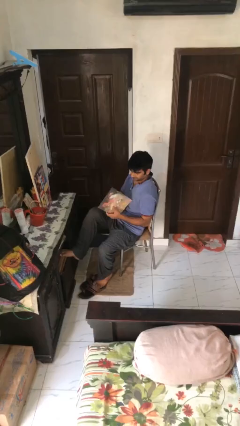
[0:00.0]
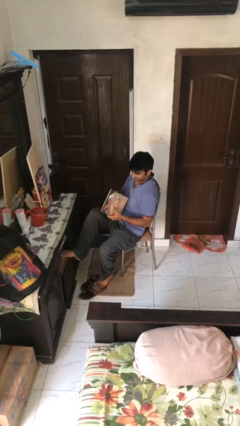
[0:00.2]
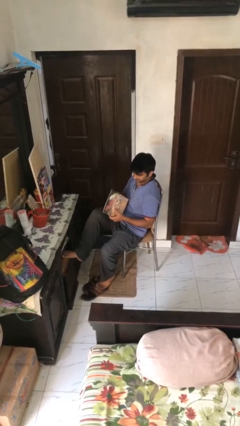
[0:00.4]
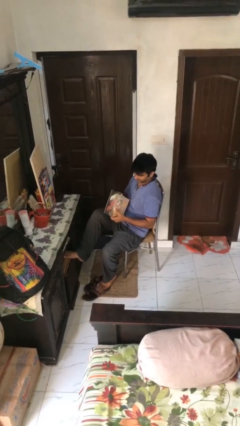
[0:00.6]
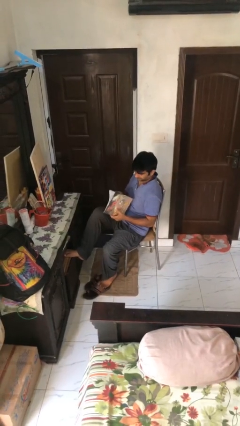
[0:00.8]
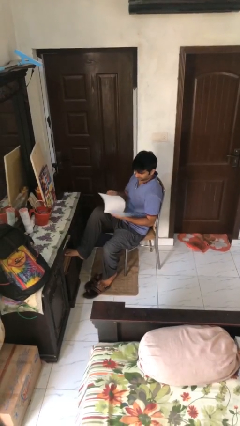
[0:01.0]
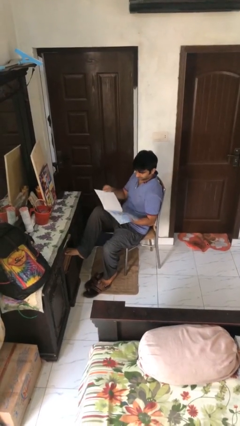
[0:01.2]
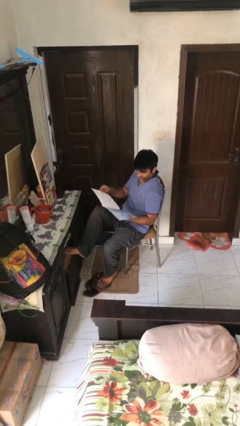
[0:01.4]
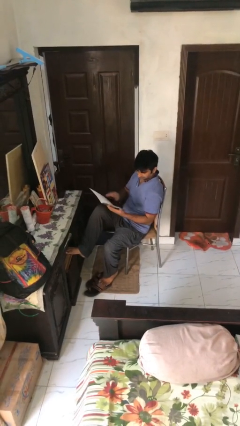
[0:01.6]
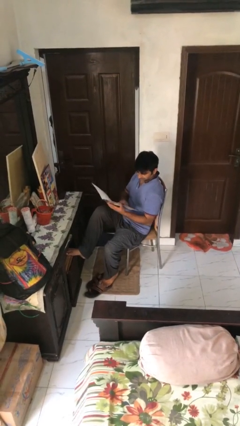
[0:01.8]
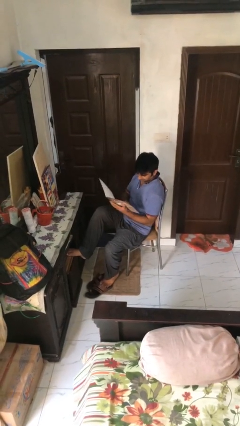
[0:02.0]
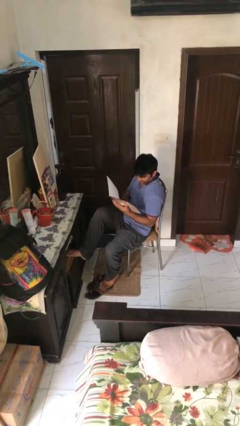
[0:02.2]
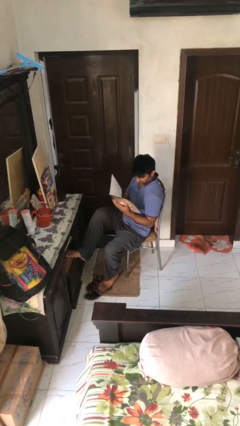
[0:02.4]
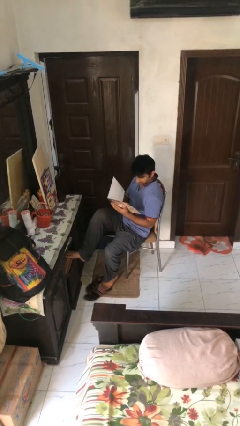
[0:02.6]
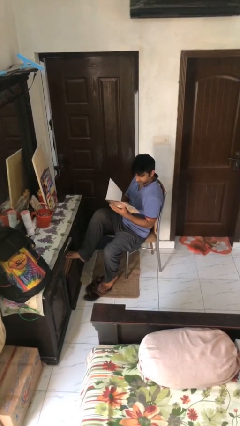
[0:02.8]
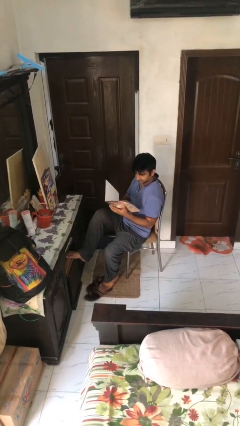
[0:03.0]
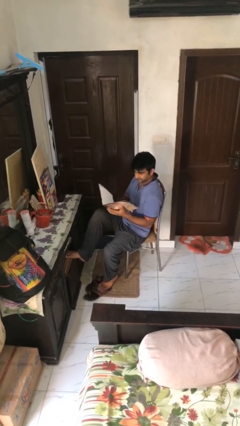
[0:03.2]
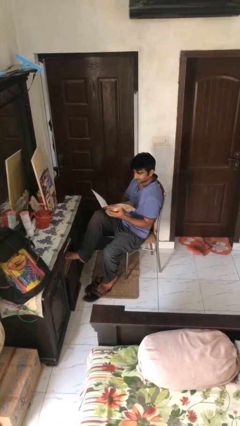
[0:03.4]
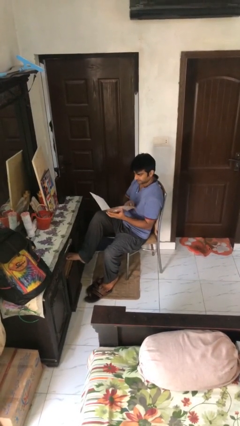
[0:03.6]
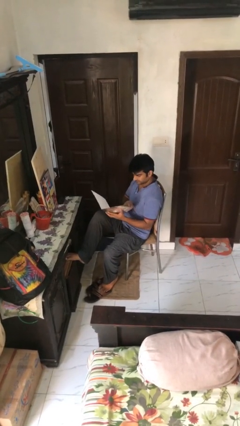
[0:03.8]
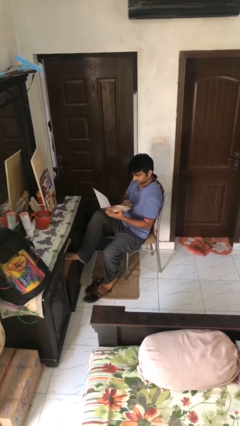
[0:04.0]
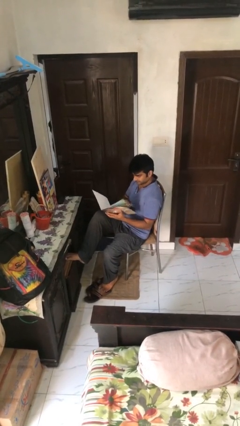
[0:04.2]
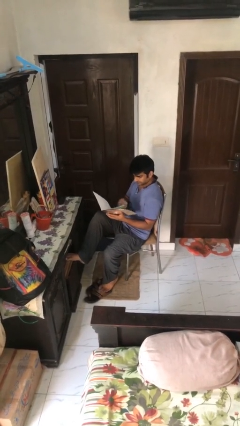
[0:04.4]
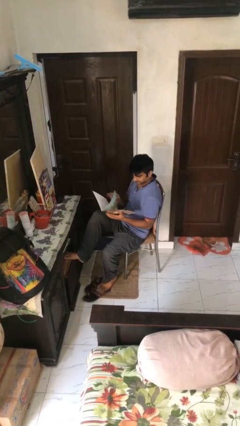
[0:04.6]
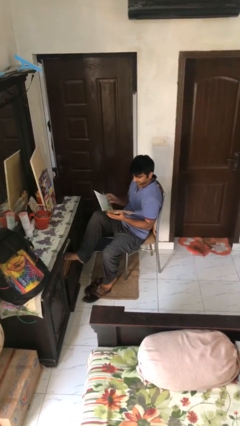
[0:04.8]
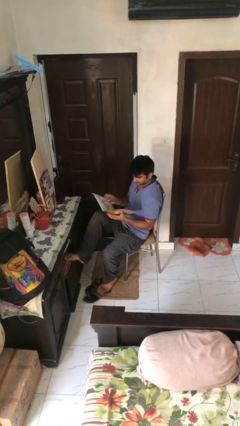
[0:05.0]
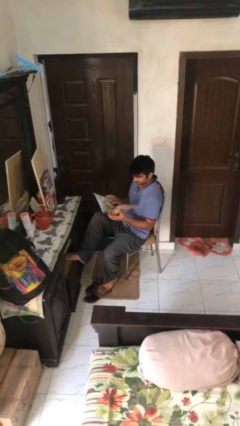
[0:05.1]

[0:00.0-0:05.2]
person reads document

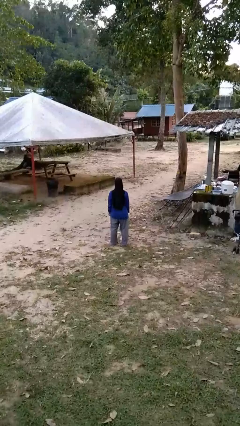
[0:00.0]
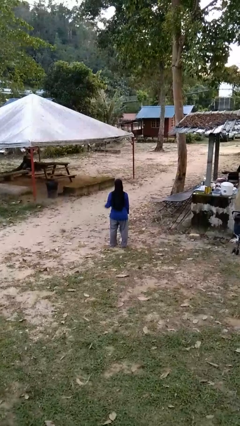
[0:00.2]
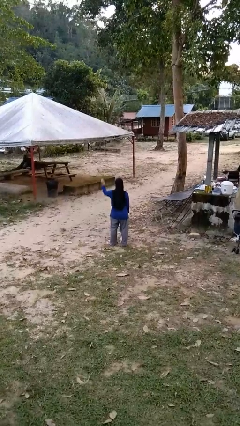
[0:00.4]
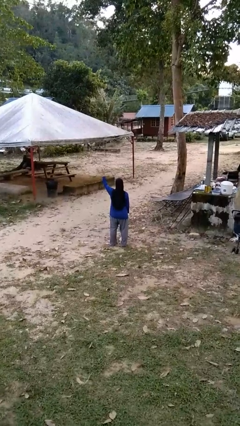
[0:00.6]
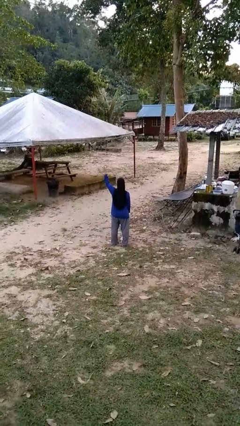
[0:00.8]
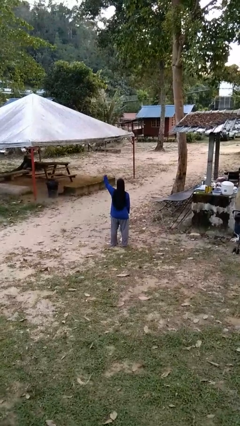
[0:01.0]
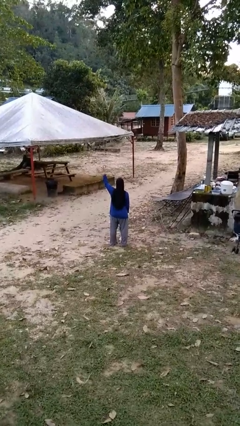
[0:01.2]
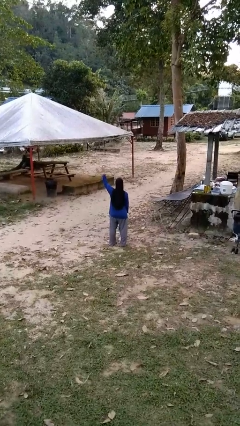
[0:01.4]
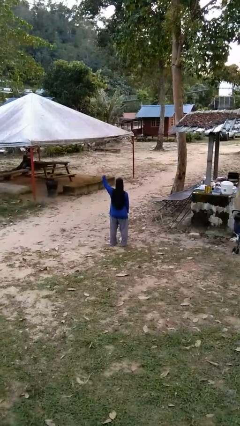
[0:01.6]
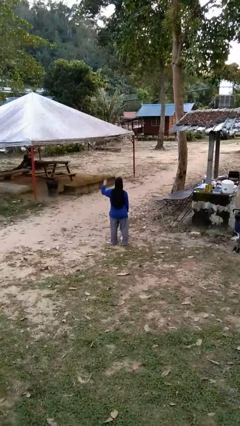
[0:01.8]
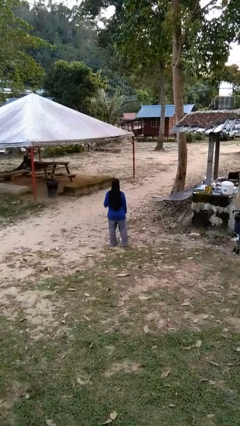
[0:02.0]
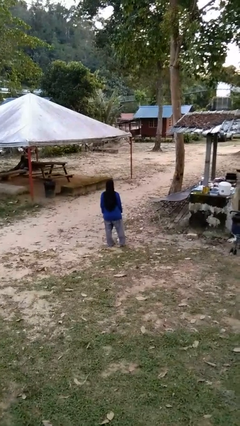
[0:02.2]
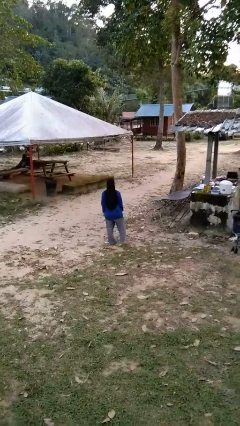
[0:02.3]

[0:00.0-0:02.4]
person gestures number four

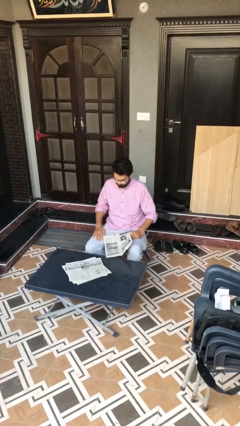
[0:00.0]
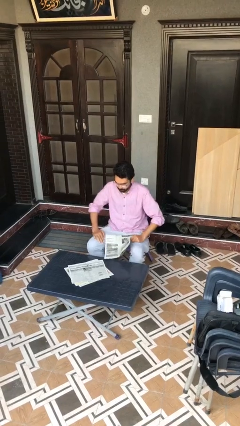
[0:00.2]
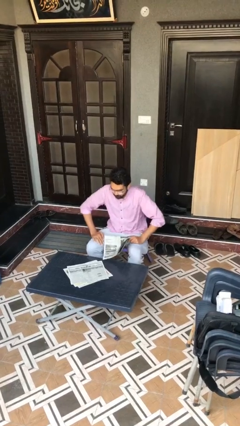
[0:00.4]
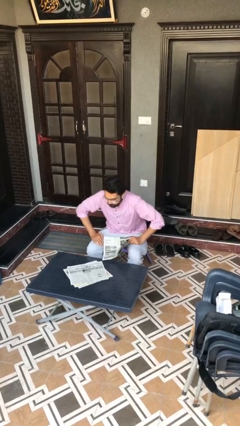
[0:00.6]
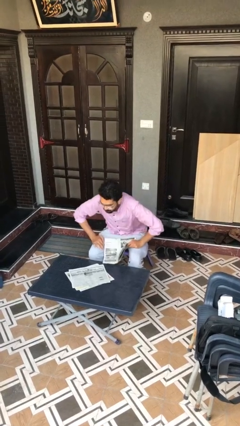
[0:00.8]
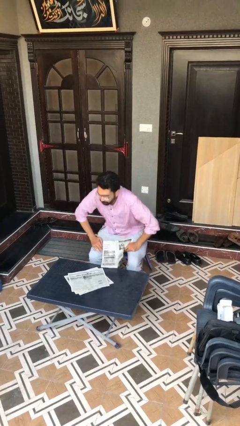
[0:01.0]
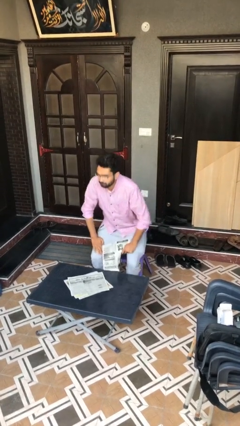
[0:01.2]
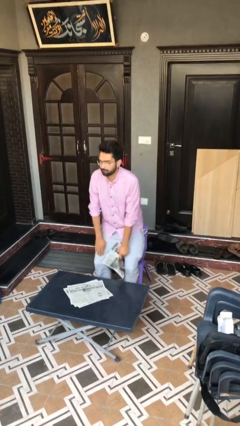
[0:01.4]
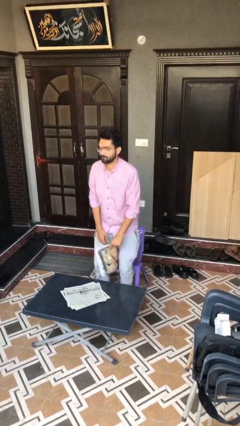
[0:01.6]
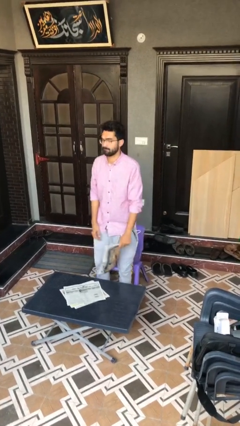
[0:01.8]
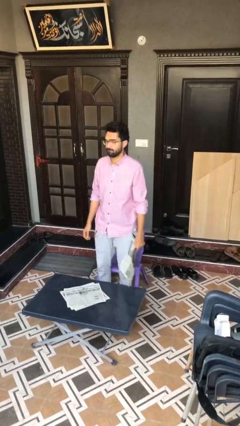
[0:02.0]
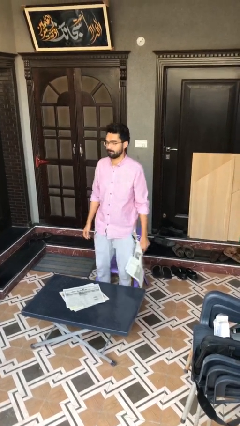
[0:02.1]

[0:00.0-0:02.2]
person stands up

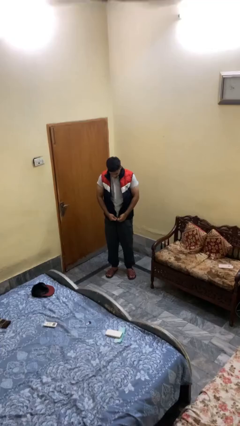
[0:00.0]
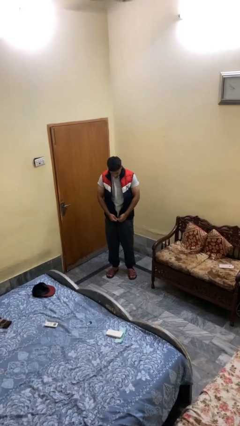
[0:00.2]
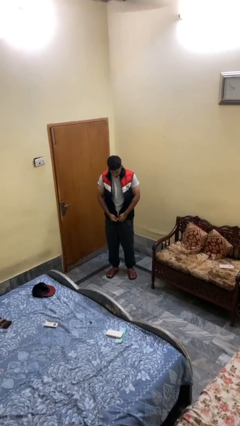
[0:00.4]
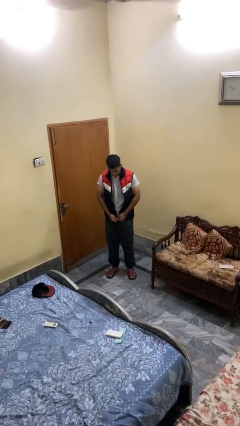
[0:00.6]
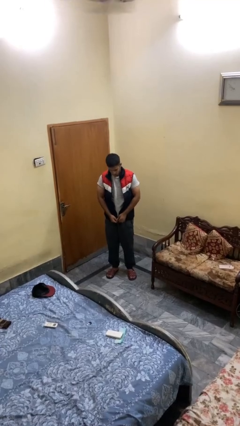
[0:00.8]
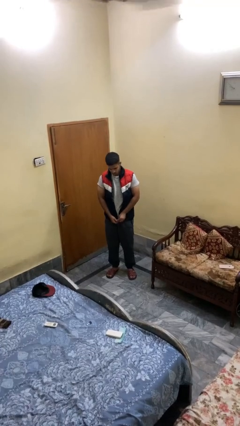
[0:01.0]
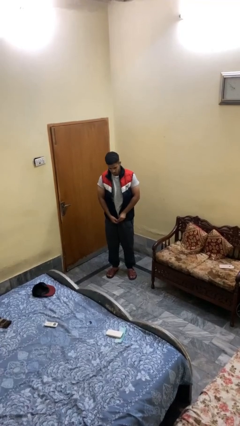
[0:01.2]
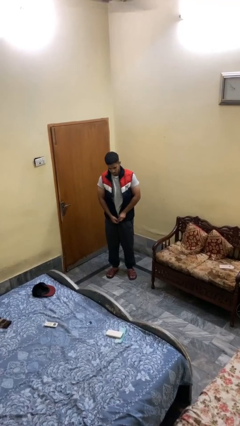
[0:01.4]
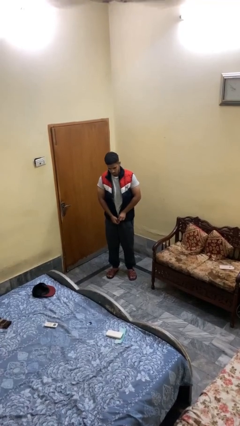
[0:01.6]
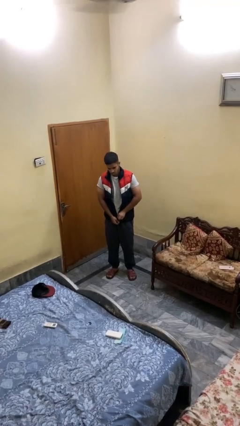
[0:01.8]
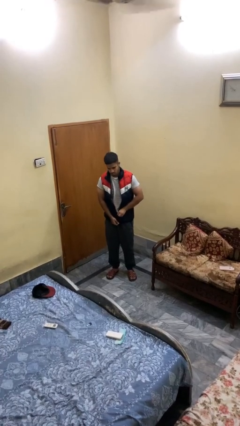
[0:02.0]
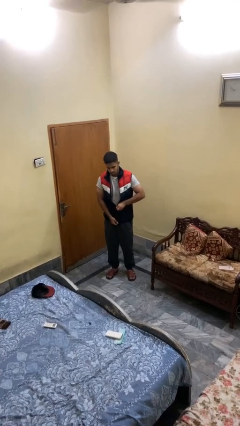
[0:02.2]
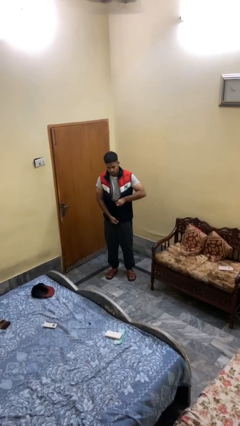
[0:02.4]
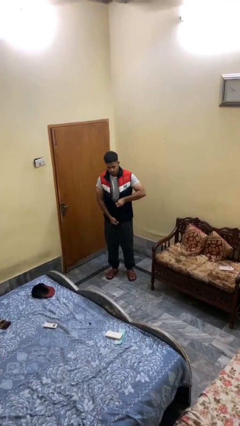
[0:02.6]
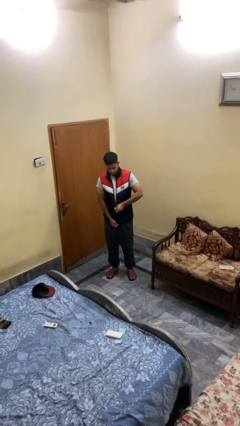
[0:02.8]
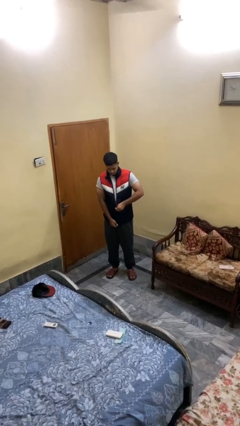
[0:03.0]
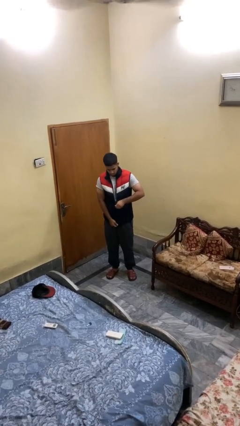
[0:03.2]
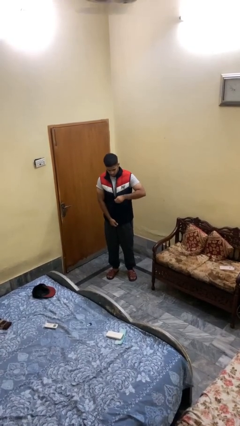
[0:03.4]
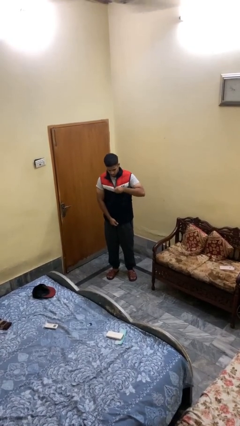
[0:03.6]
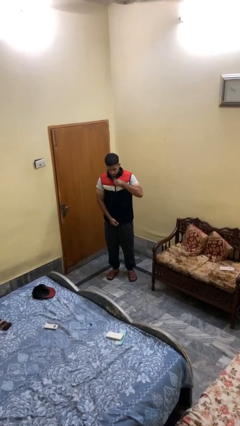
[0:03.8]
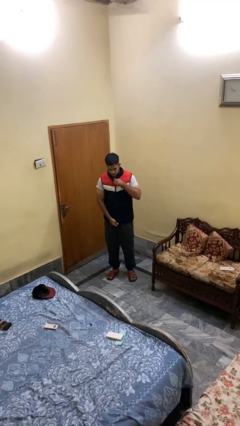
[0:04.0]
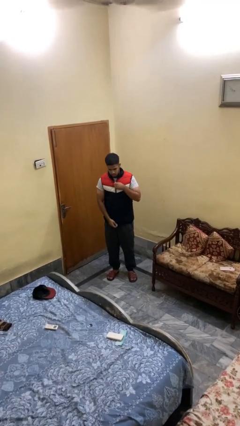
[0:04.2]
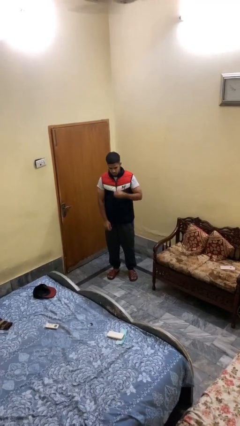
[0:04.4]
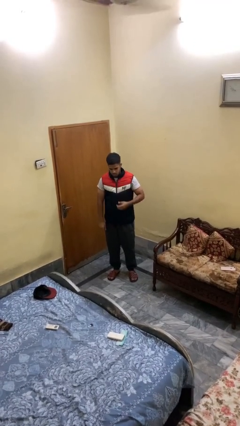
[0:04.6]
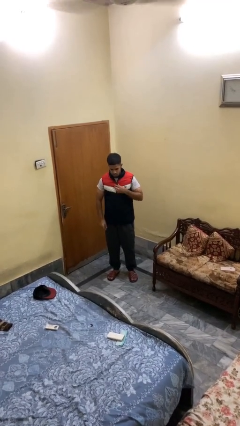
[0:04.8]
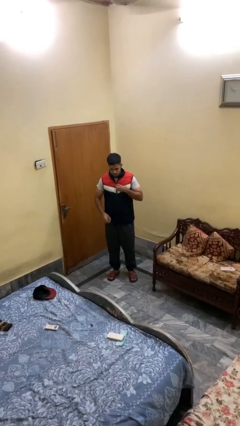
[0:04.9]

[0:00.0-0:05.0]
person zips up jacket

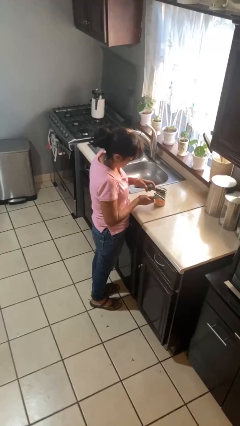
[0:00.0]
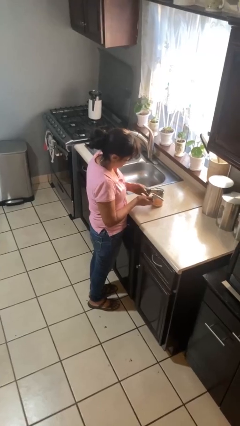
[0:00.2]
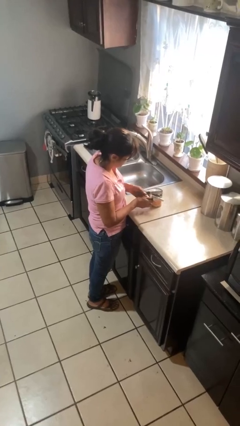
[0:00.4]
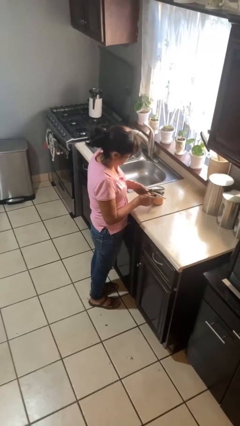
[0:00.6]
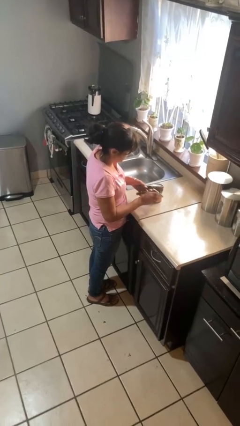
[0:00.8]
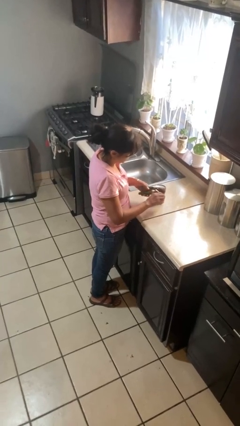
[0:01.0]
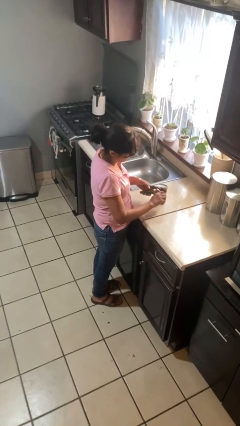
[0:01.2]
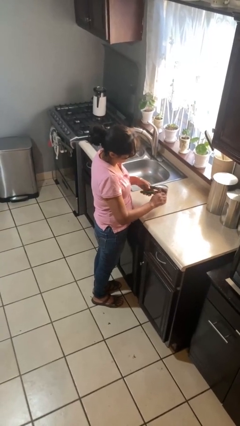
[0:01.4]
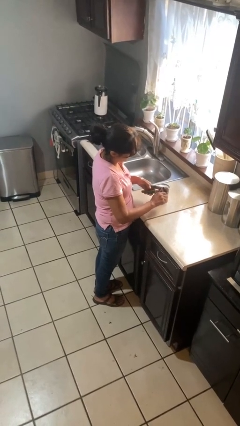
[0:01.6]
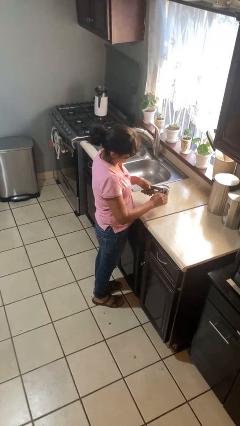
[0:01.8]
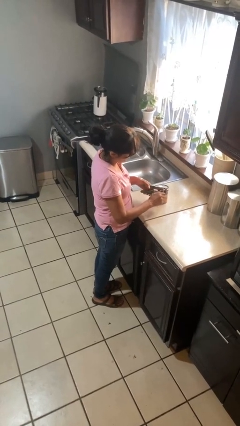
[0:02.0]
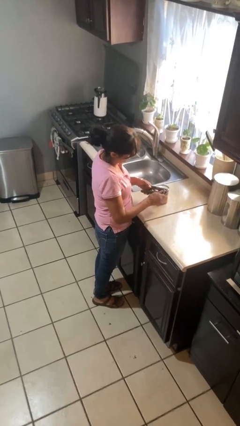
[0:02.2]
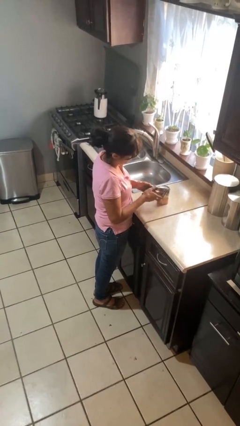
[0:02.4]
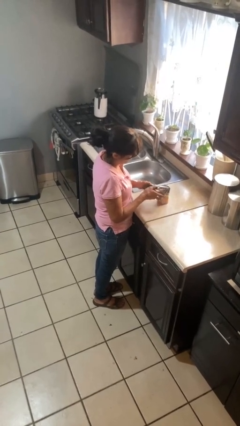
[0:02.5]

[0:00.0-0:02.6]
person opens can with can opener

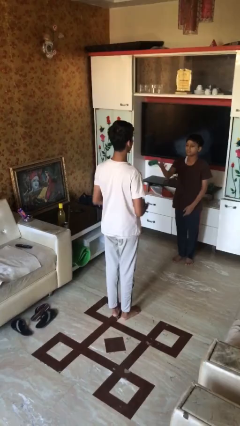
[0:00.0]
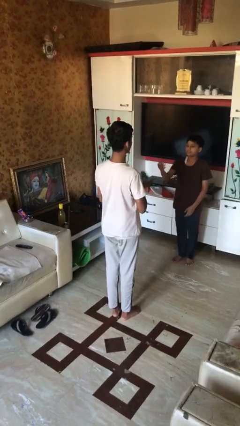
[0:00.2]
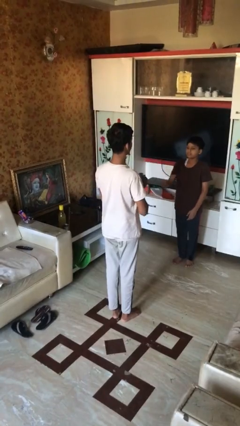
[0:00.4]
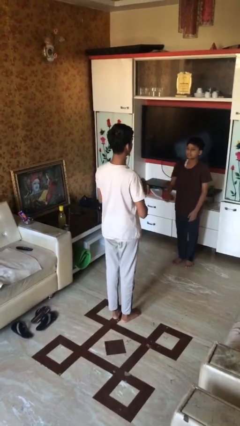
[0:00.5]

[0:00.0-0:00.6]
person catches object from person
